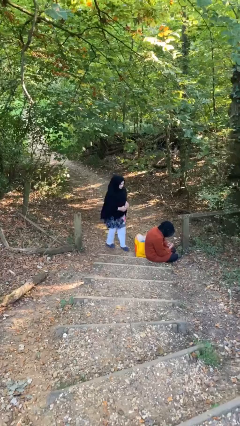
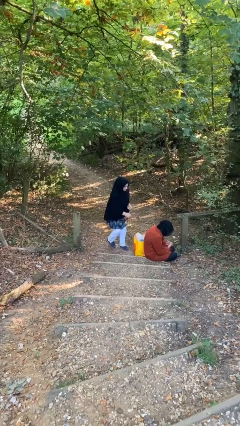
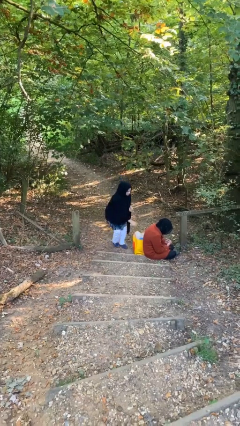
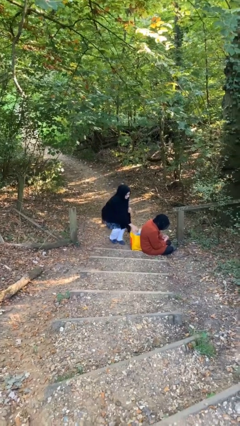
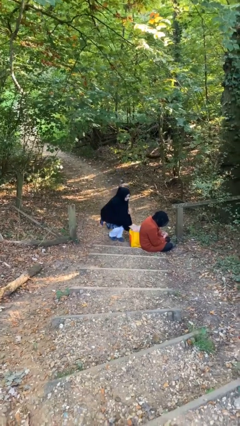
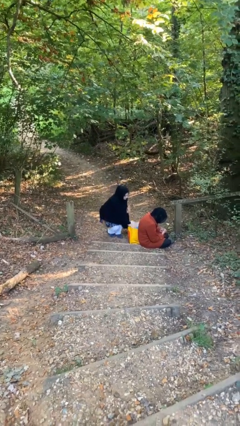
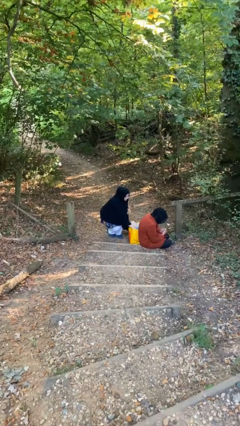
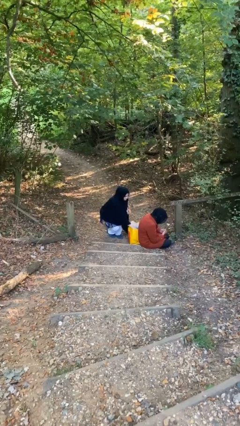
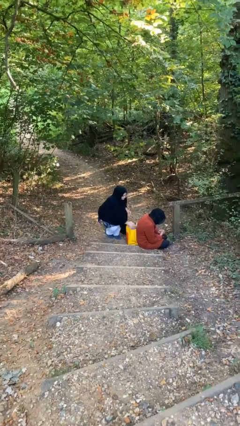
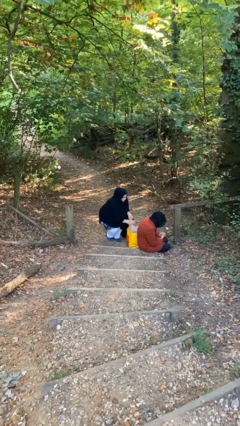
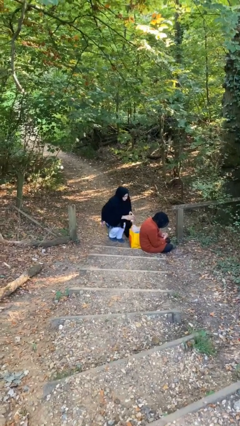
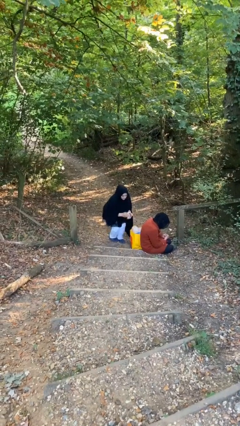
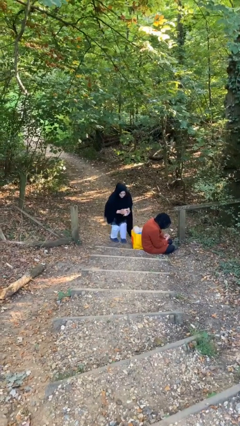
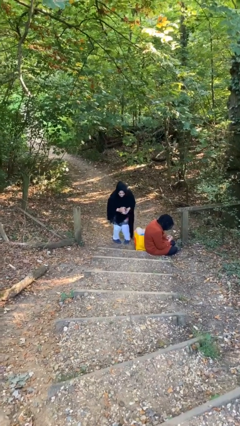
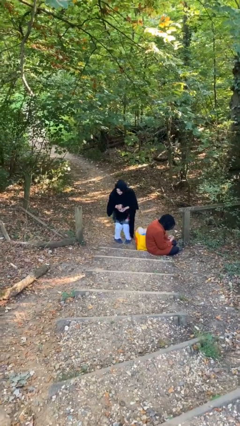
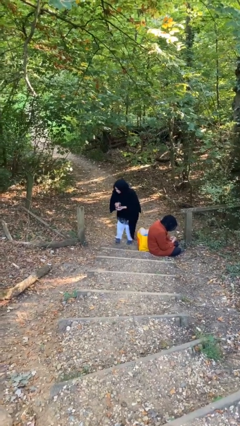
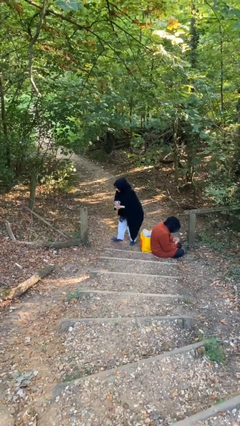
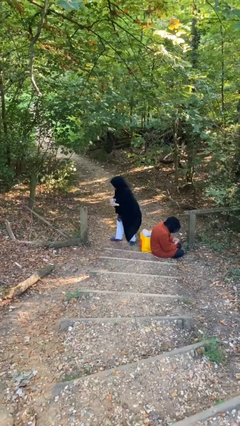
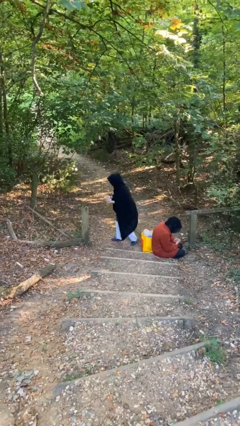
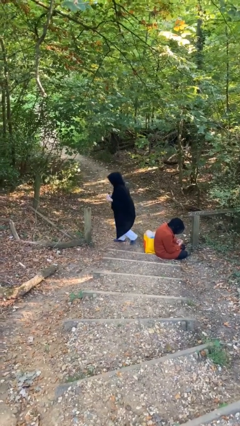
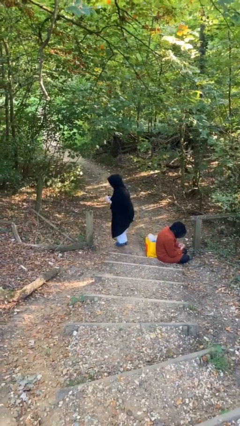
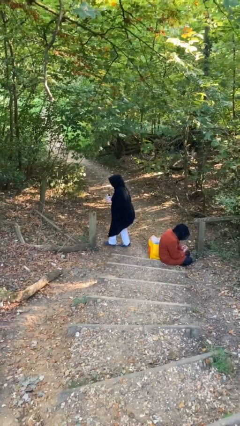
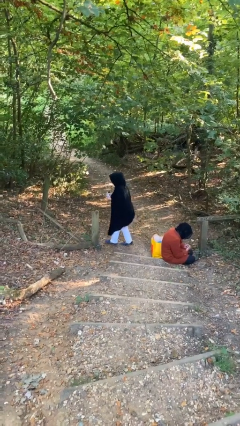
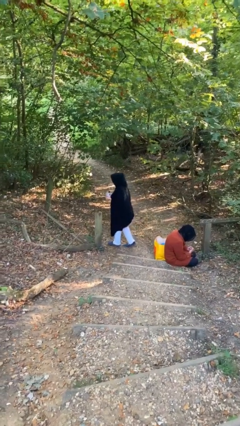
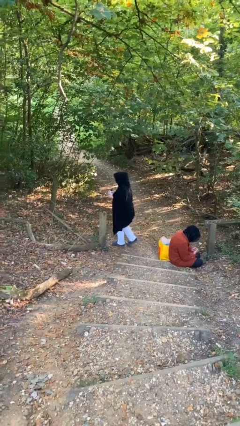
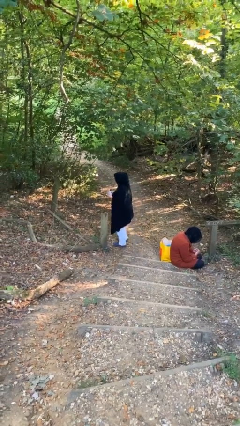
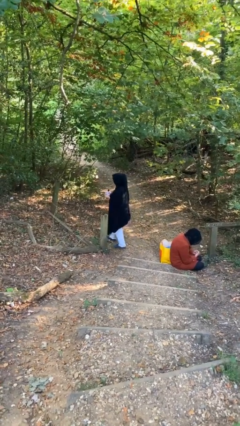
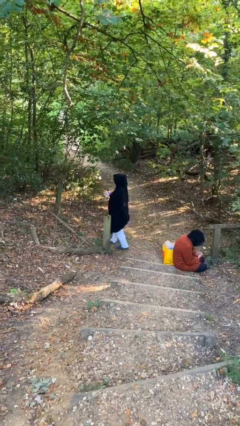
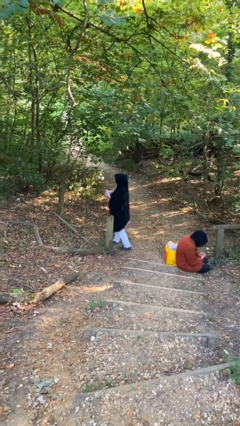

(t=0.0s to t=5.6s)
person steals object from person

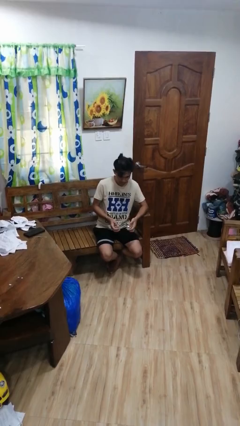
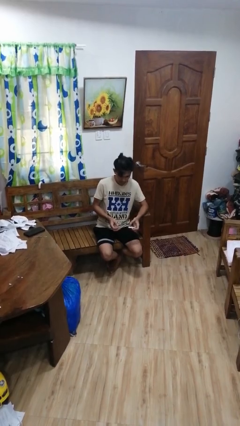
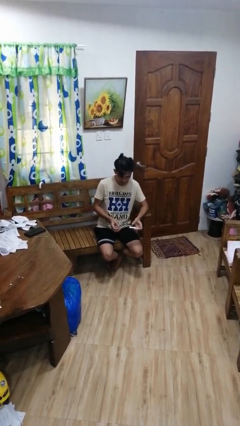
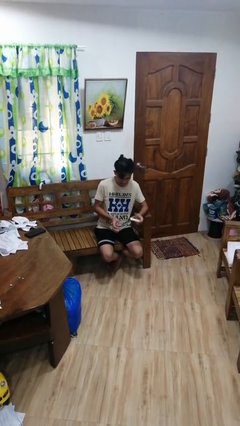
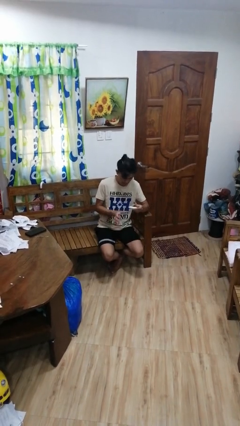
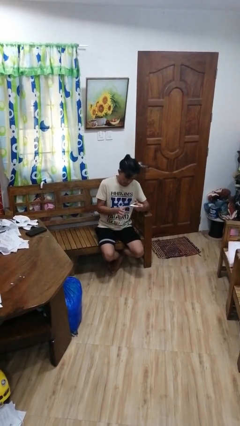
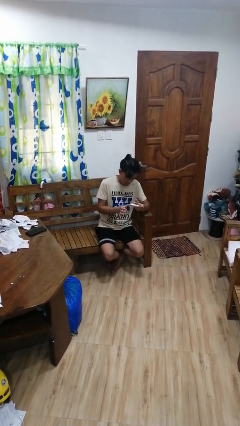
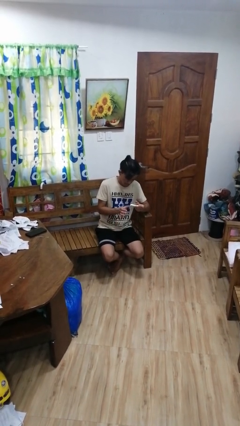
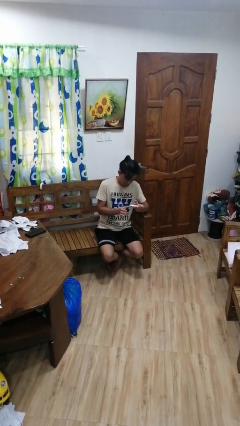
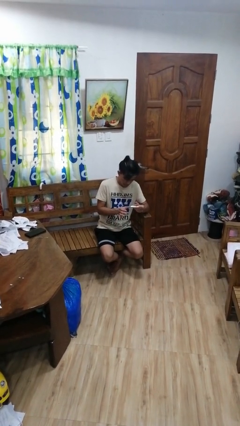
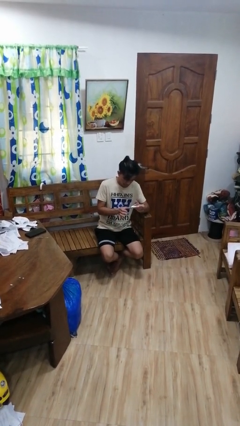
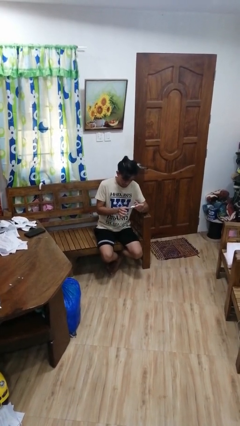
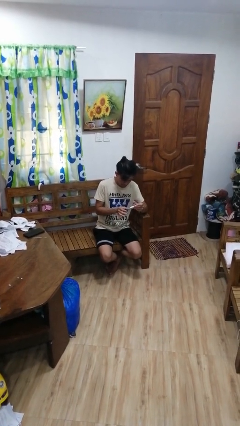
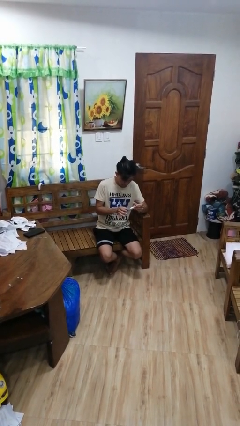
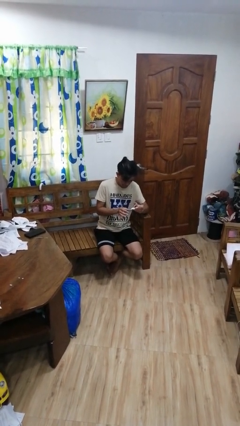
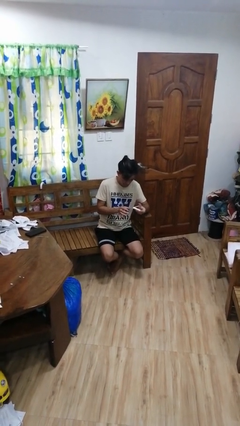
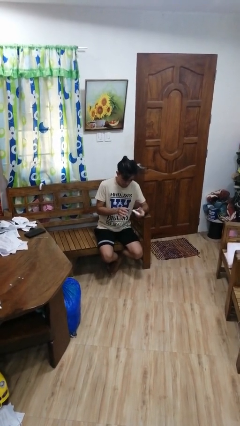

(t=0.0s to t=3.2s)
person clips fingernails

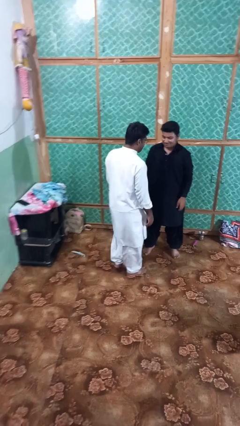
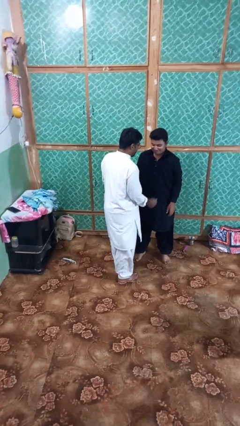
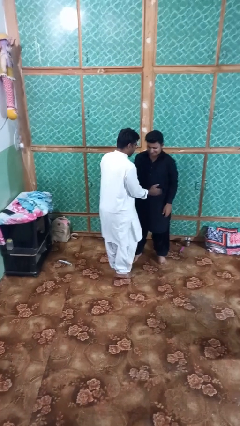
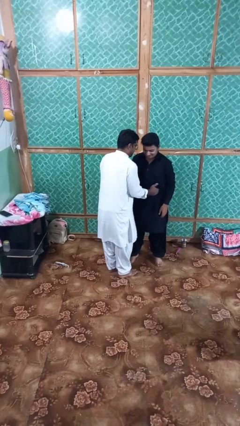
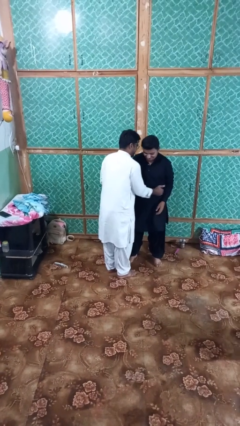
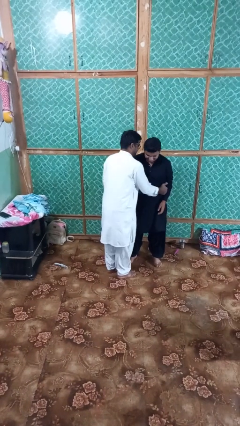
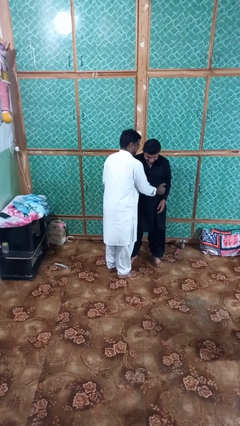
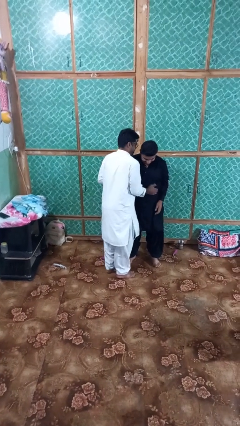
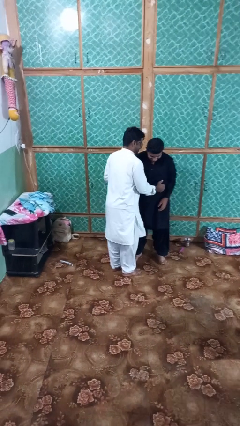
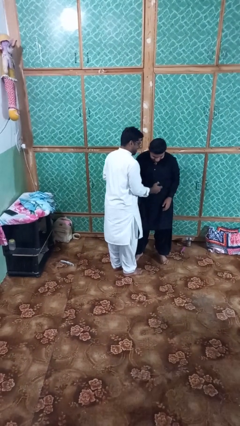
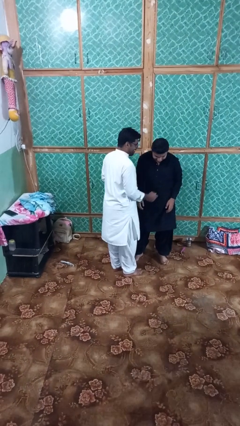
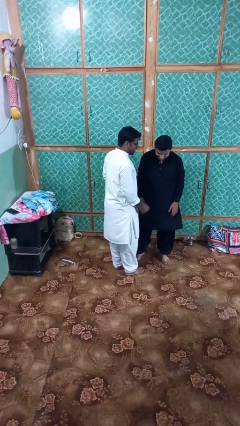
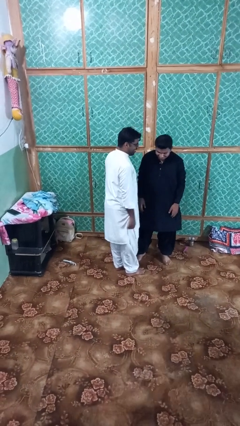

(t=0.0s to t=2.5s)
person tickles person

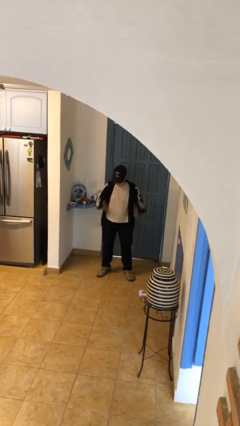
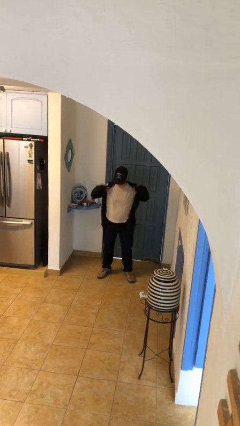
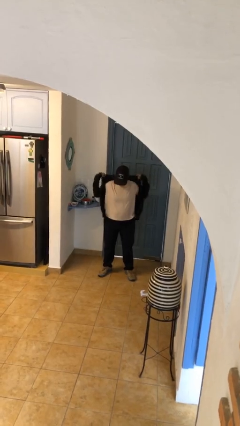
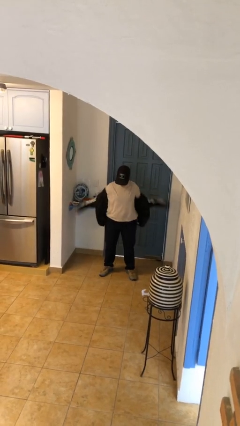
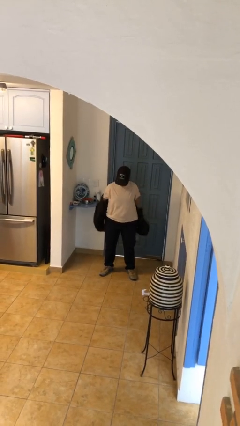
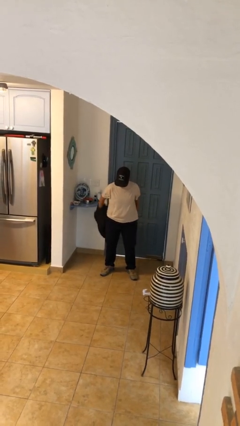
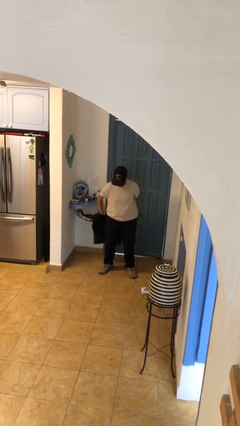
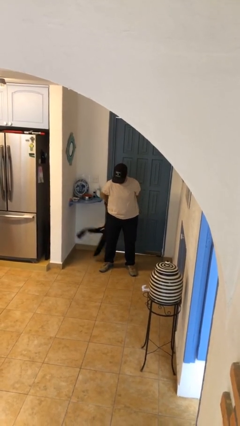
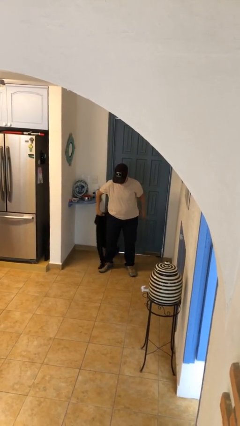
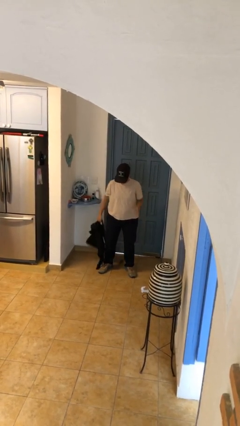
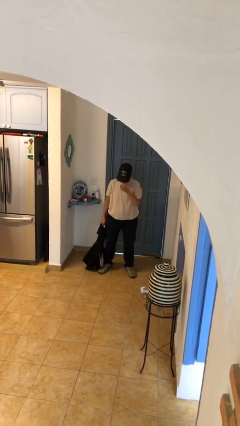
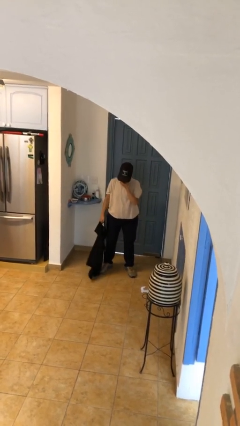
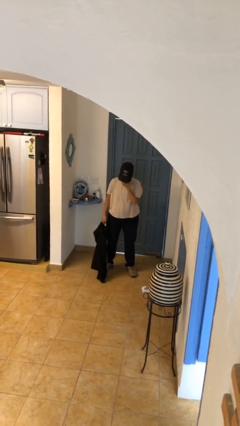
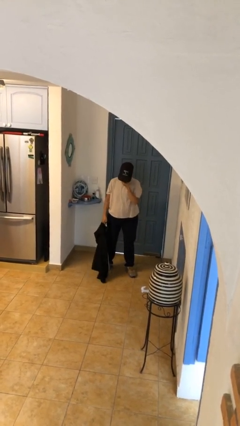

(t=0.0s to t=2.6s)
person takes off jacket

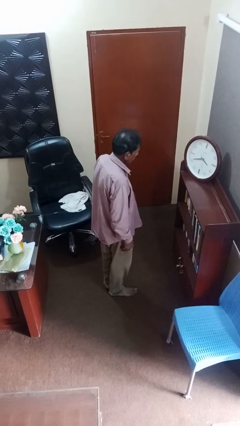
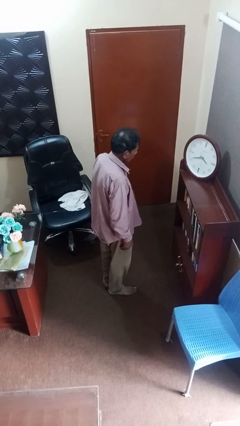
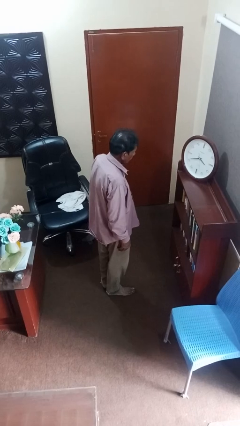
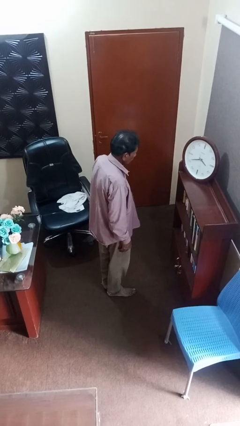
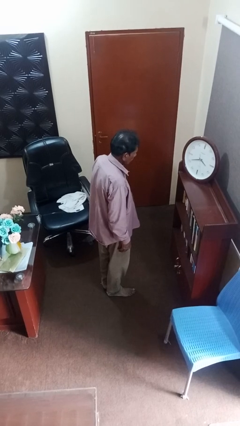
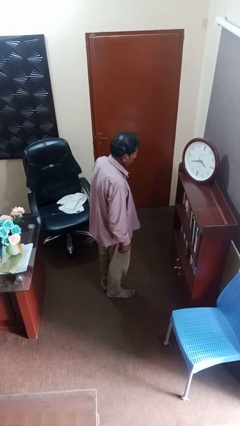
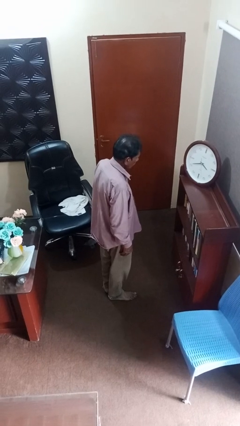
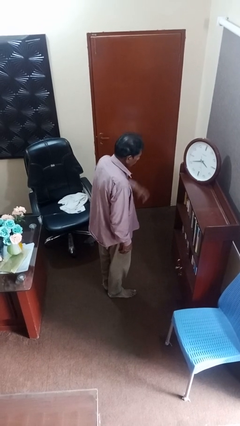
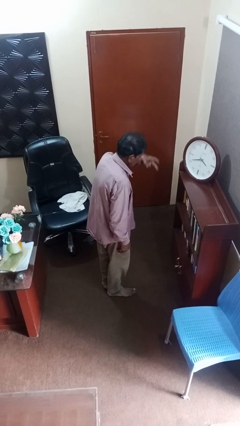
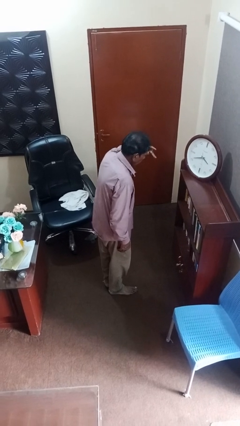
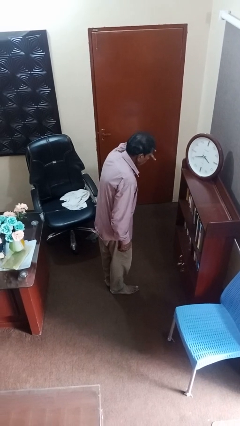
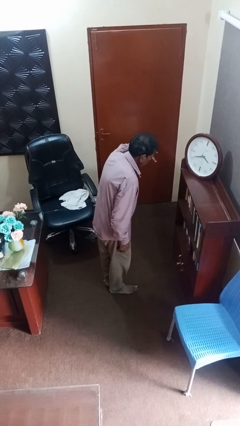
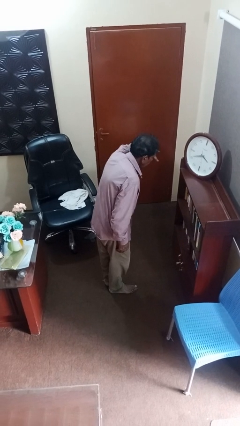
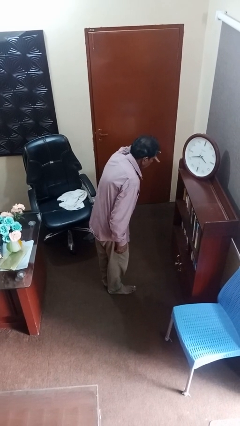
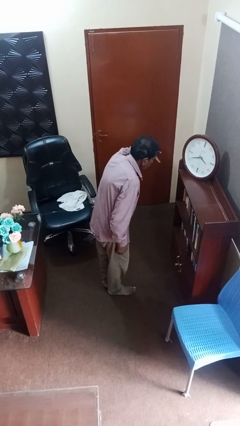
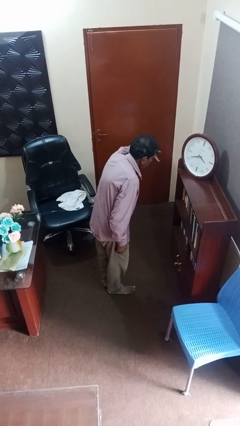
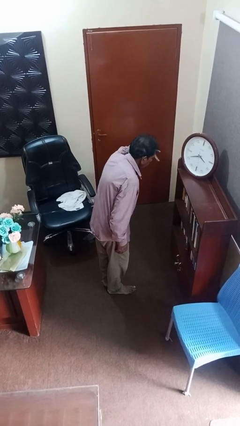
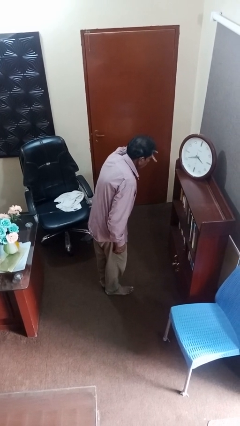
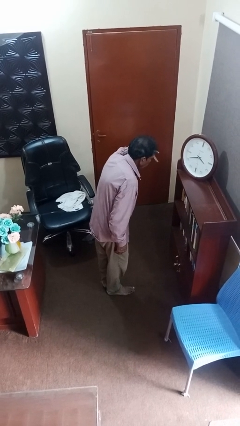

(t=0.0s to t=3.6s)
person gestures watch closely
